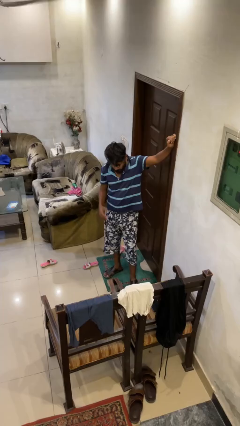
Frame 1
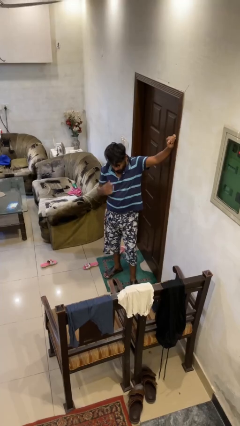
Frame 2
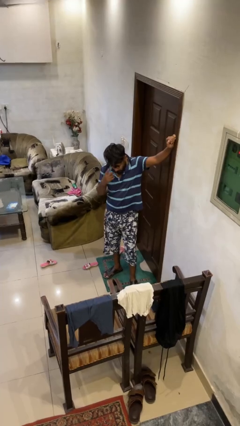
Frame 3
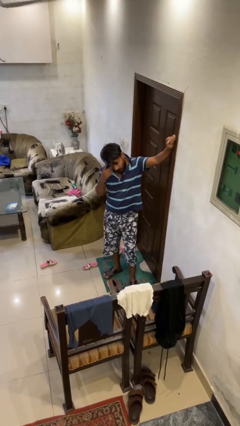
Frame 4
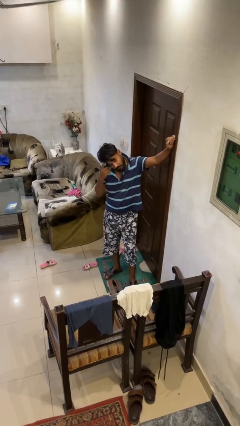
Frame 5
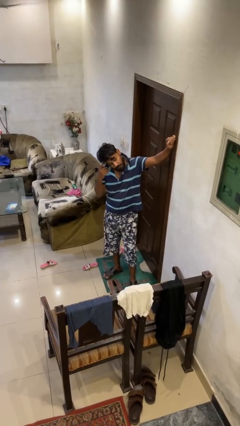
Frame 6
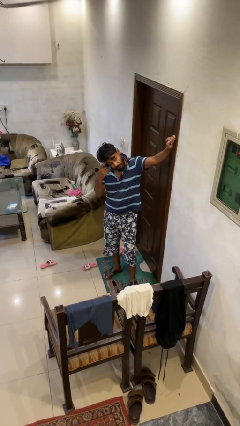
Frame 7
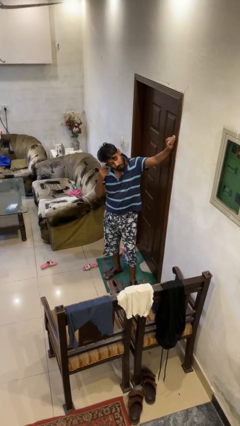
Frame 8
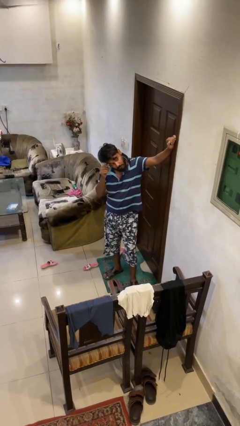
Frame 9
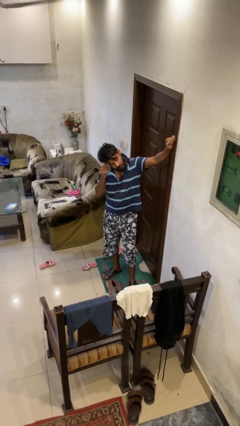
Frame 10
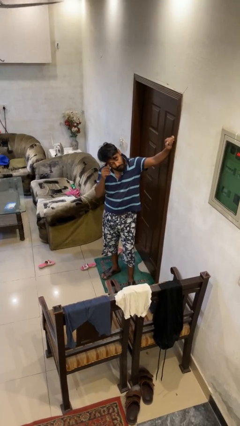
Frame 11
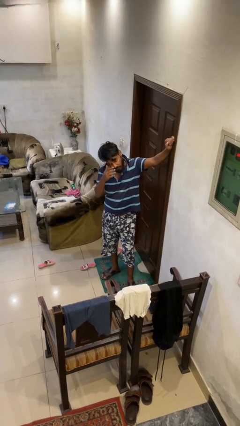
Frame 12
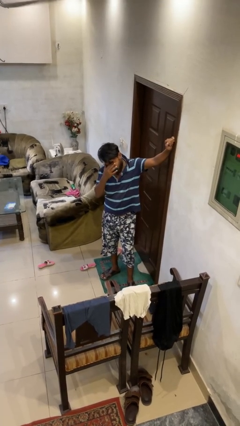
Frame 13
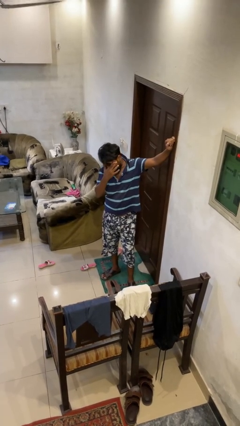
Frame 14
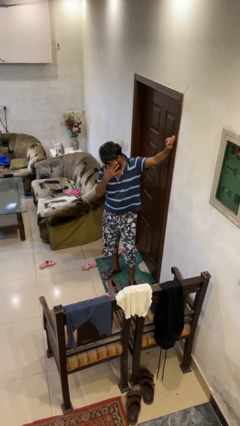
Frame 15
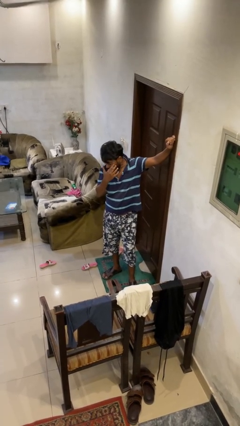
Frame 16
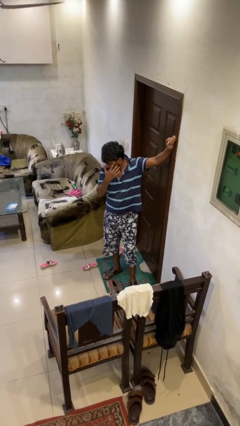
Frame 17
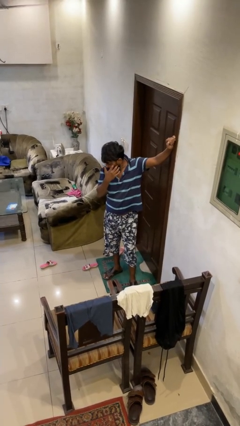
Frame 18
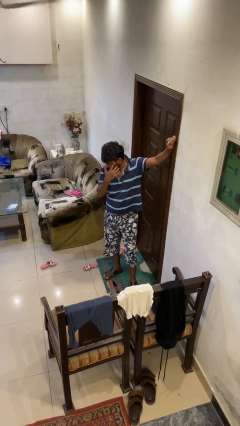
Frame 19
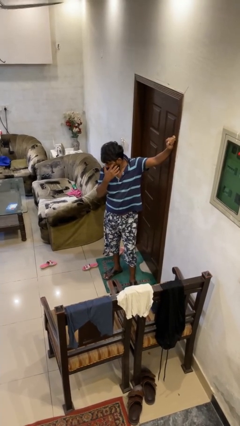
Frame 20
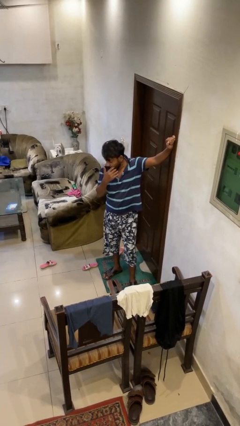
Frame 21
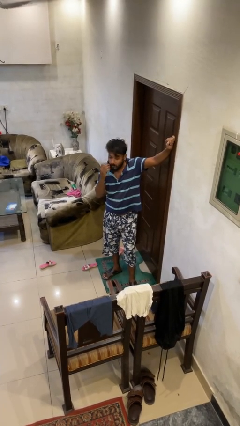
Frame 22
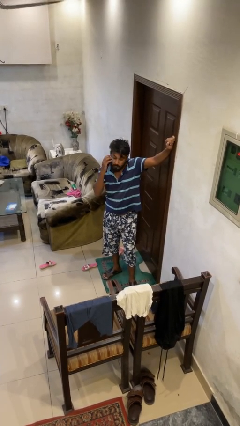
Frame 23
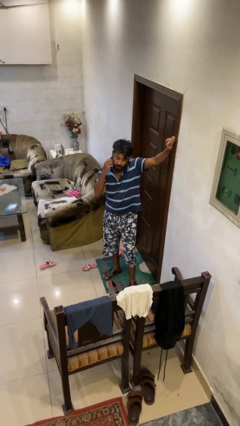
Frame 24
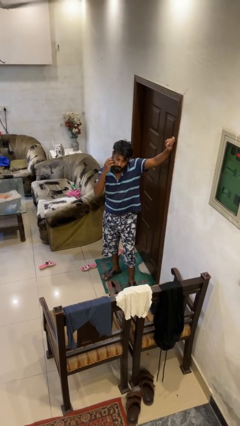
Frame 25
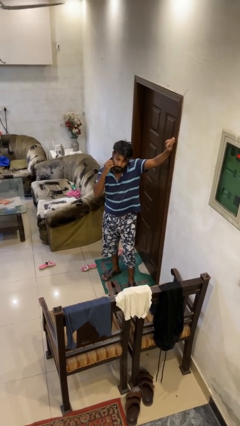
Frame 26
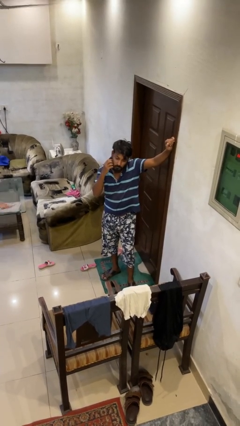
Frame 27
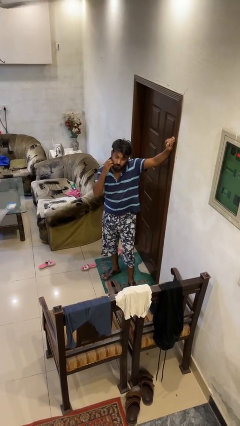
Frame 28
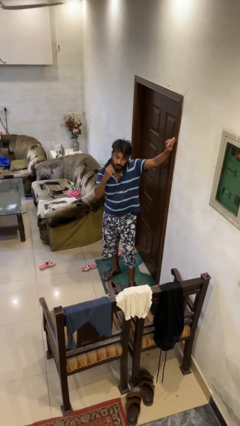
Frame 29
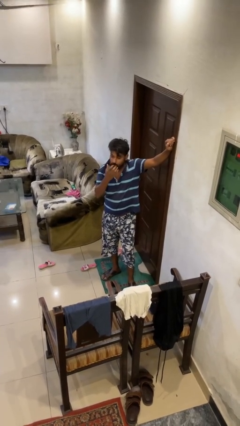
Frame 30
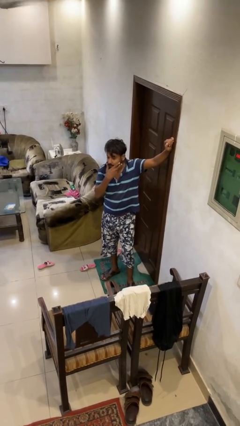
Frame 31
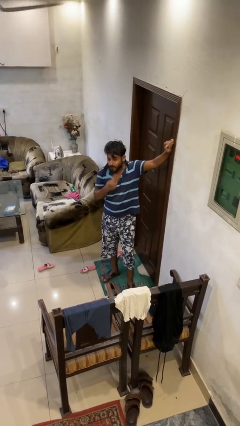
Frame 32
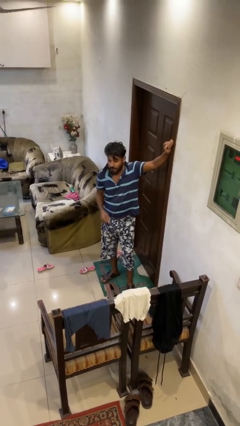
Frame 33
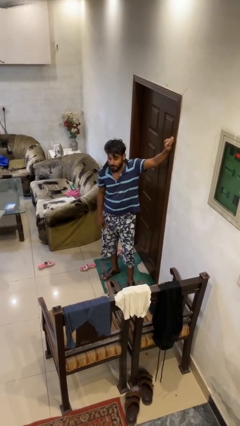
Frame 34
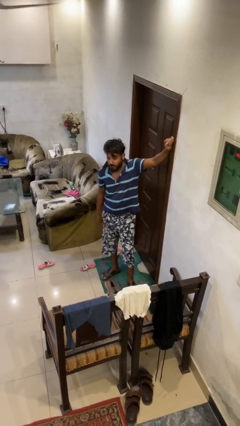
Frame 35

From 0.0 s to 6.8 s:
person scratches face

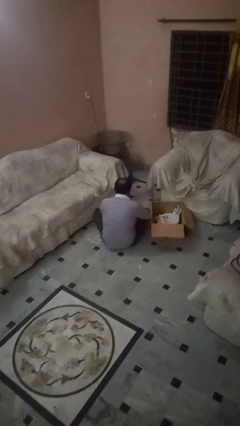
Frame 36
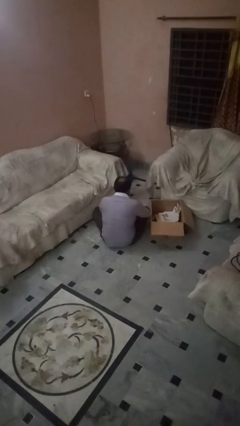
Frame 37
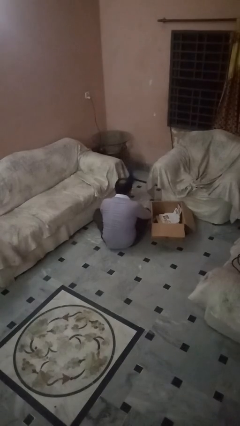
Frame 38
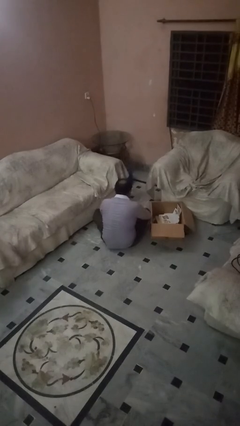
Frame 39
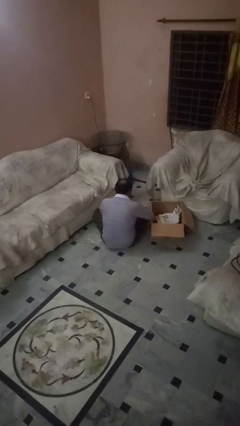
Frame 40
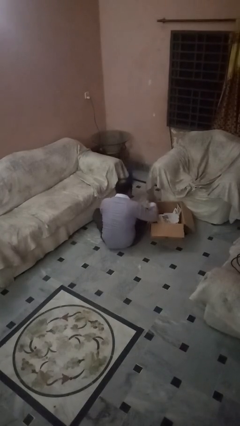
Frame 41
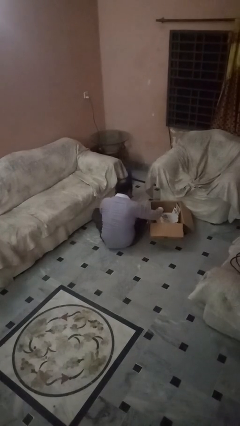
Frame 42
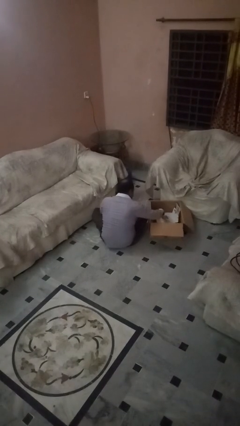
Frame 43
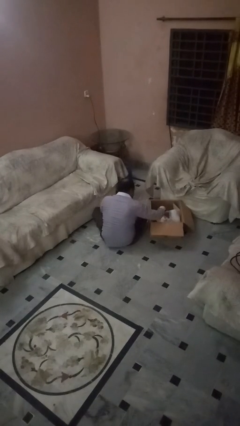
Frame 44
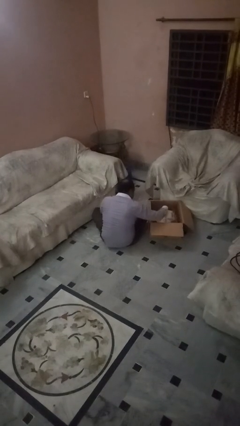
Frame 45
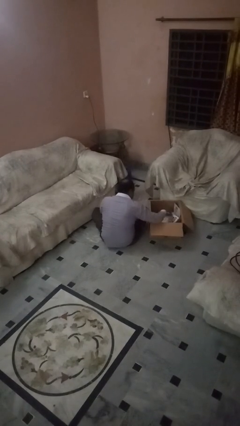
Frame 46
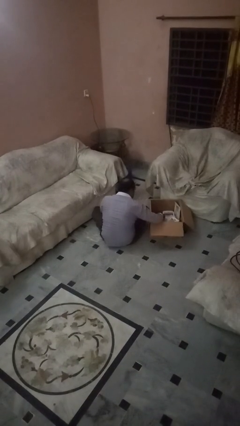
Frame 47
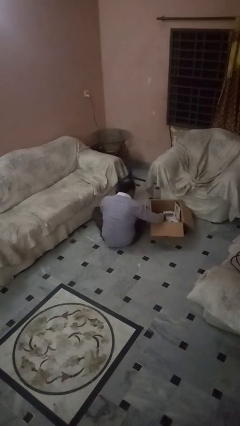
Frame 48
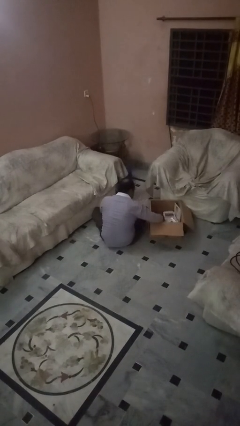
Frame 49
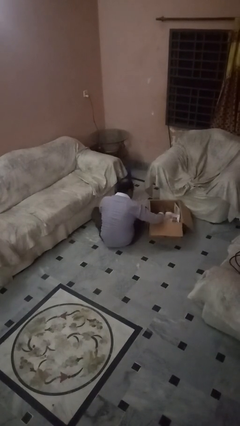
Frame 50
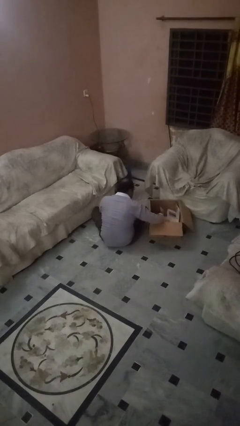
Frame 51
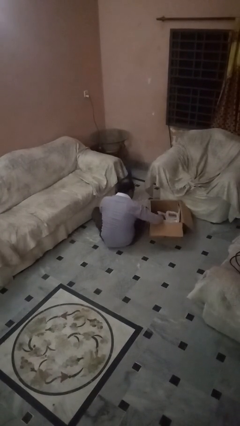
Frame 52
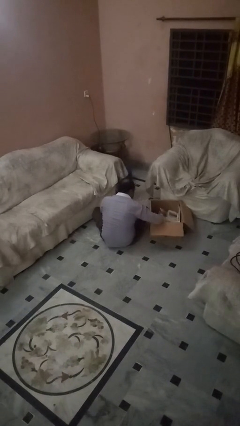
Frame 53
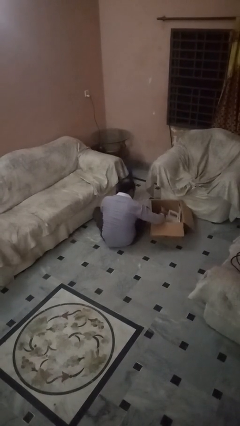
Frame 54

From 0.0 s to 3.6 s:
person searches in box

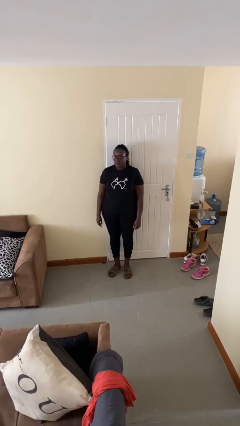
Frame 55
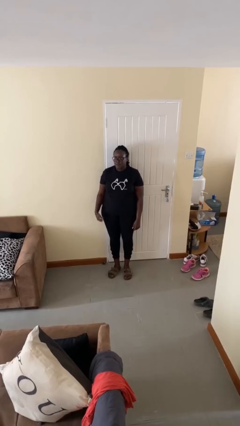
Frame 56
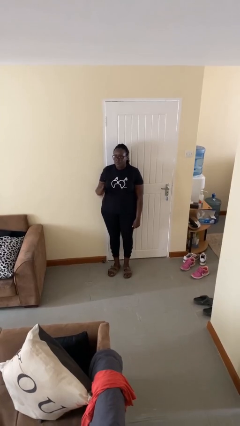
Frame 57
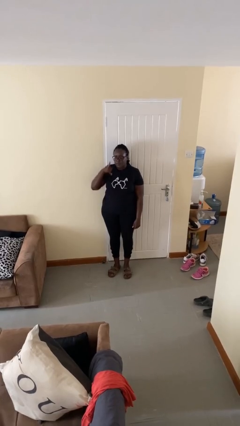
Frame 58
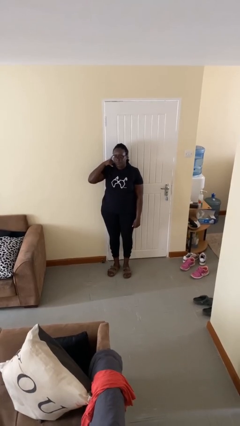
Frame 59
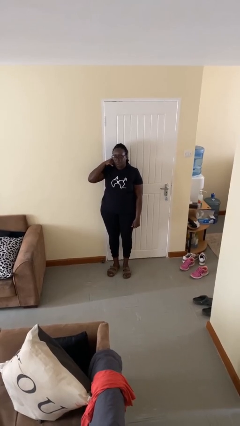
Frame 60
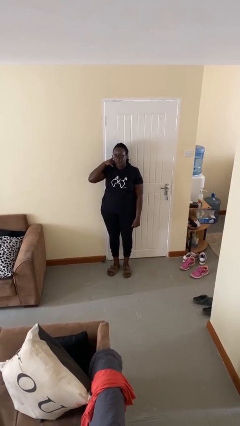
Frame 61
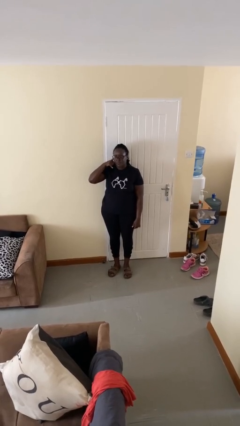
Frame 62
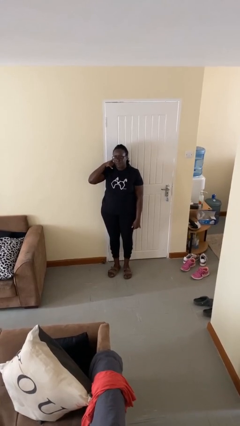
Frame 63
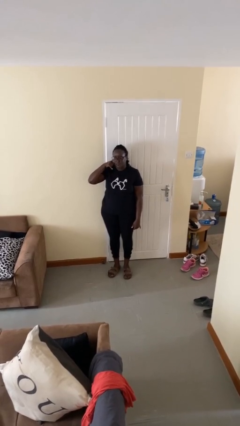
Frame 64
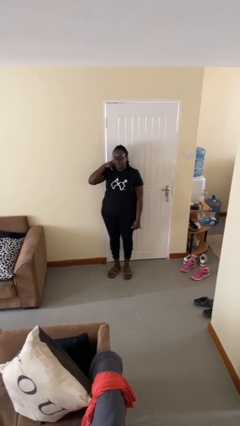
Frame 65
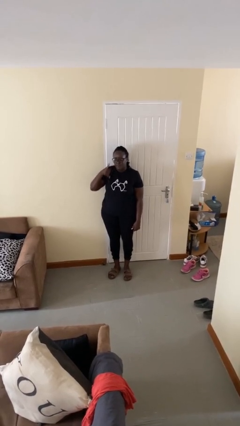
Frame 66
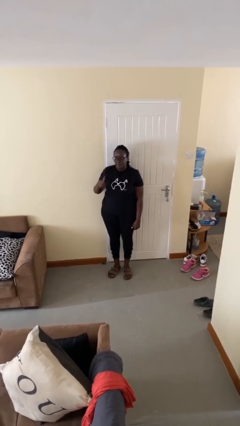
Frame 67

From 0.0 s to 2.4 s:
person gestures call me

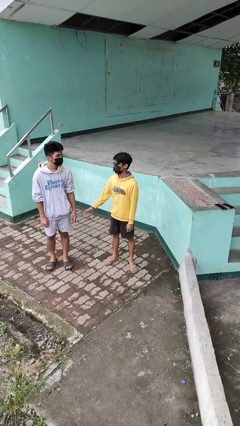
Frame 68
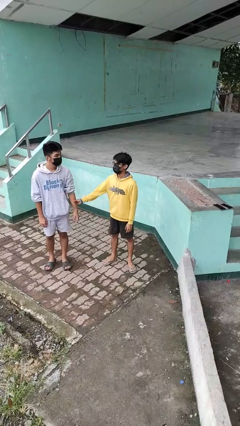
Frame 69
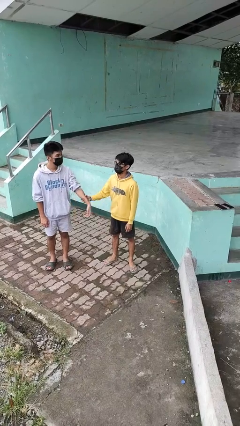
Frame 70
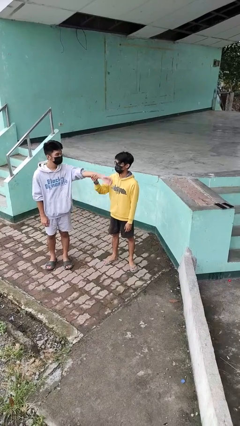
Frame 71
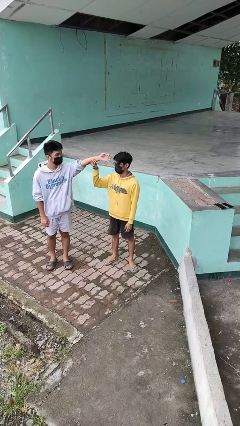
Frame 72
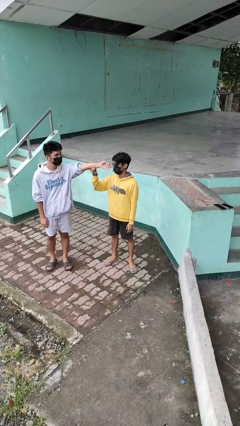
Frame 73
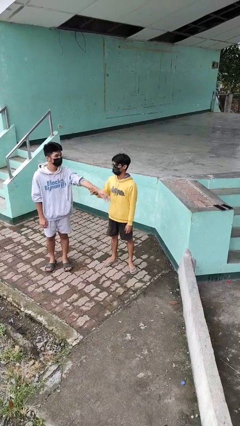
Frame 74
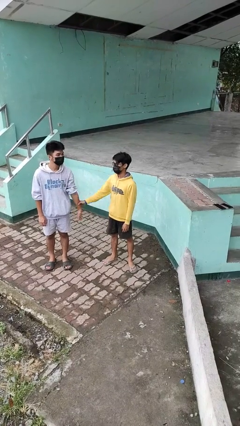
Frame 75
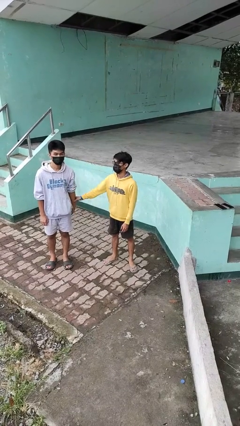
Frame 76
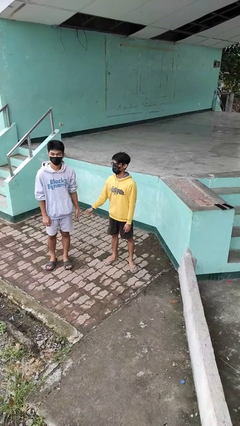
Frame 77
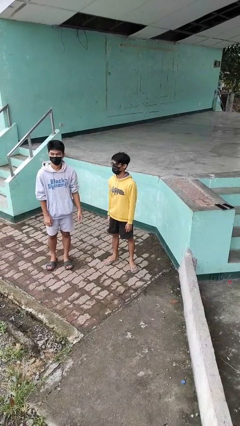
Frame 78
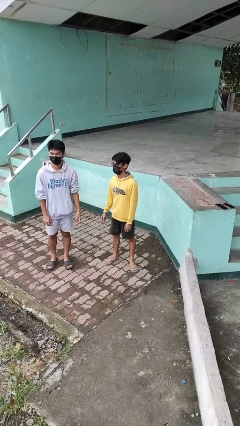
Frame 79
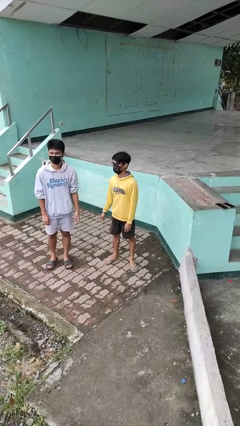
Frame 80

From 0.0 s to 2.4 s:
person grabs person by forearm

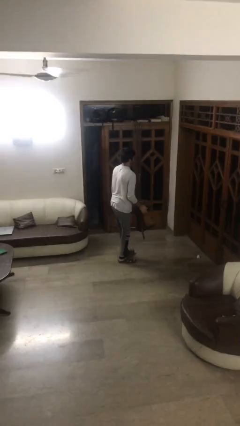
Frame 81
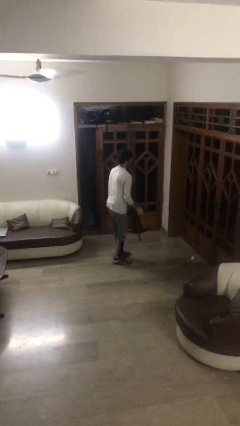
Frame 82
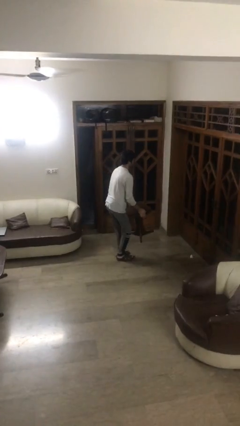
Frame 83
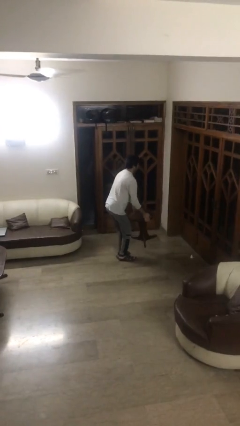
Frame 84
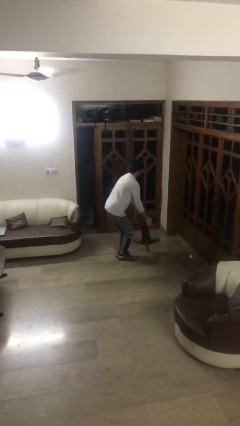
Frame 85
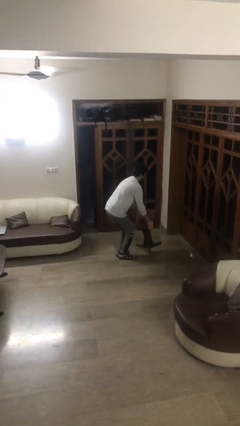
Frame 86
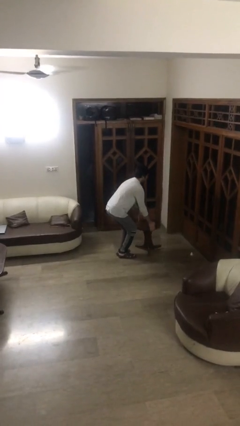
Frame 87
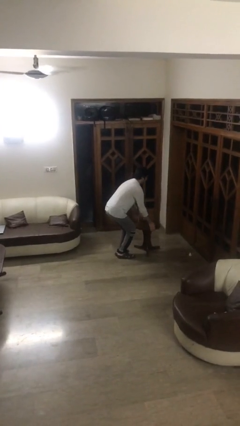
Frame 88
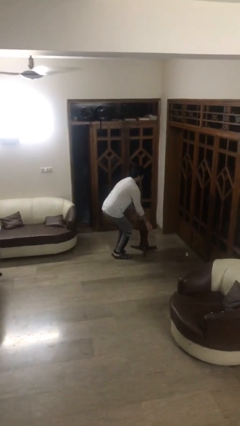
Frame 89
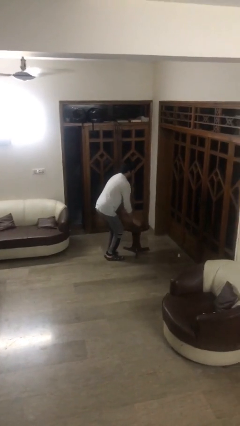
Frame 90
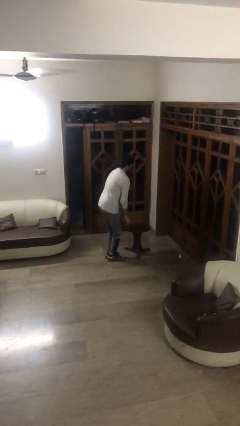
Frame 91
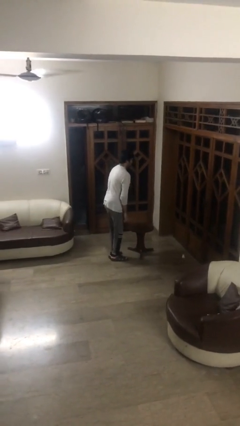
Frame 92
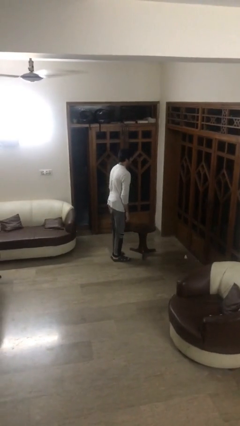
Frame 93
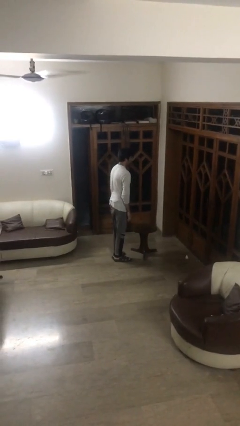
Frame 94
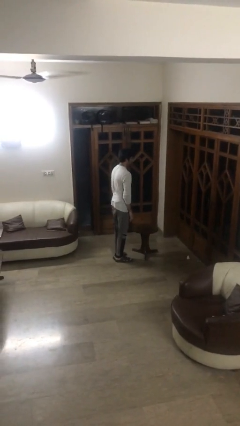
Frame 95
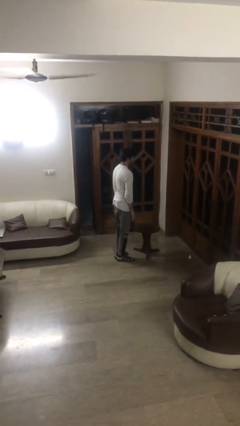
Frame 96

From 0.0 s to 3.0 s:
person puts down object on floor
